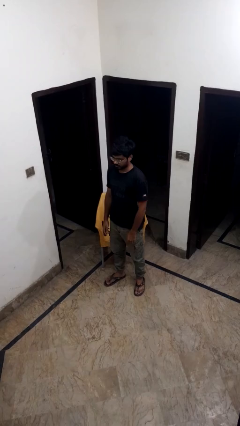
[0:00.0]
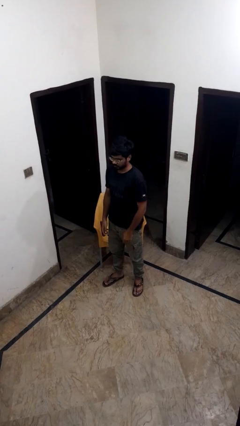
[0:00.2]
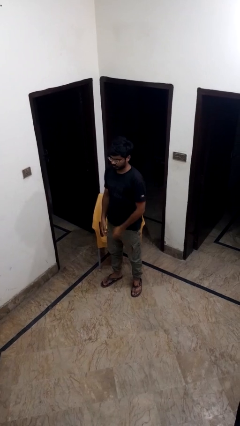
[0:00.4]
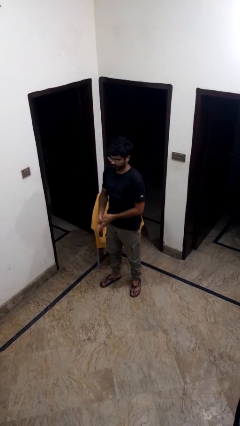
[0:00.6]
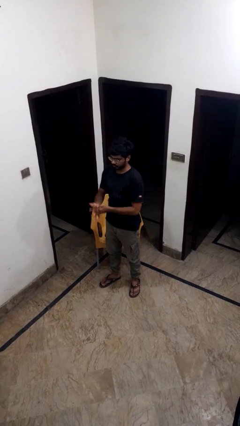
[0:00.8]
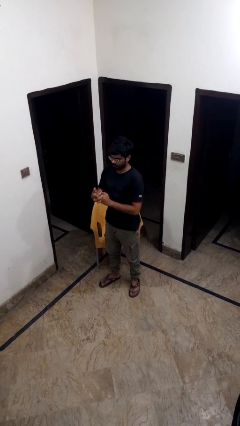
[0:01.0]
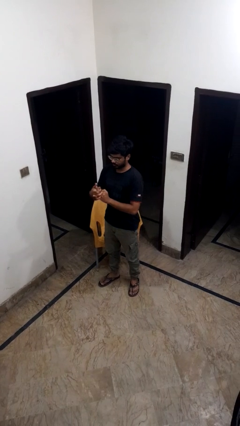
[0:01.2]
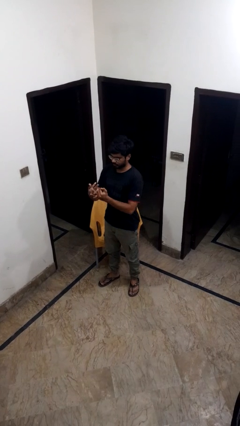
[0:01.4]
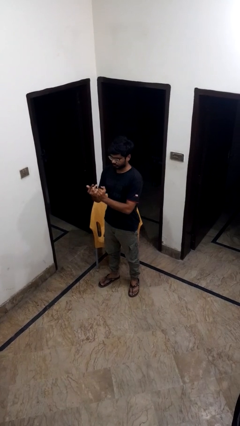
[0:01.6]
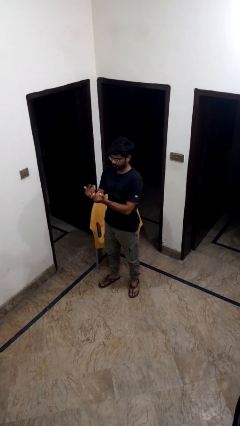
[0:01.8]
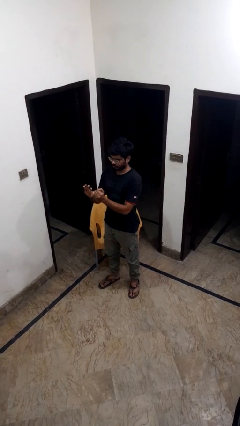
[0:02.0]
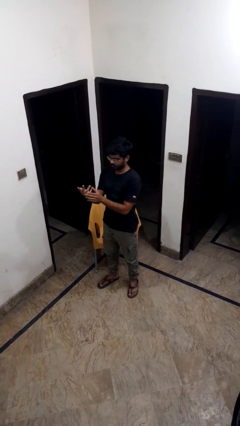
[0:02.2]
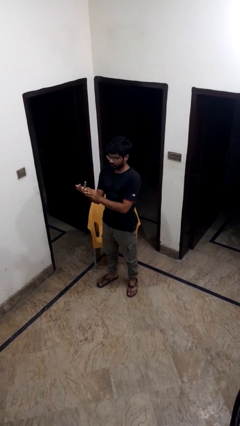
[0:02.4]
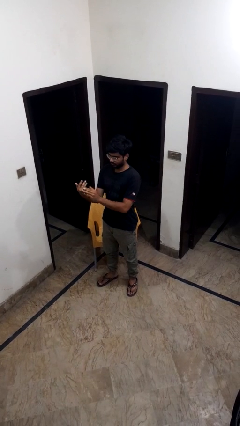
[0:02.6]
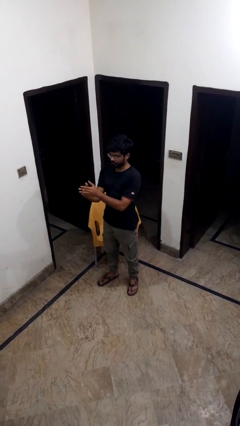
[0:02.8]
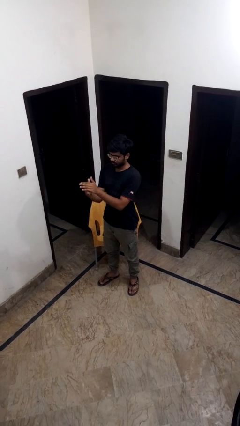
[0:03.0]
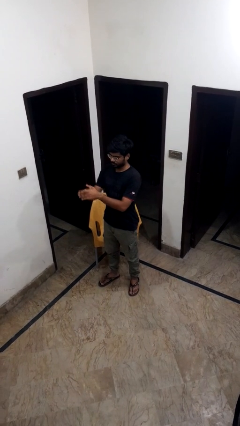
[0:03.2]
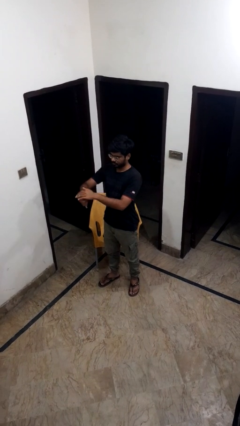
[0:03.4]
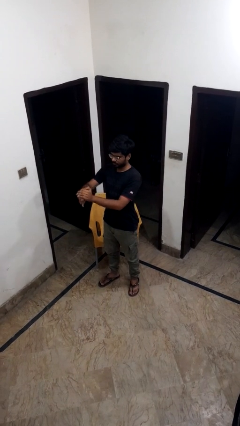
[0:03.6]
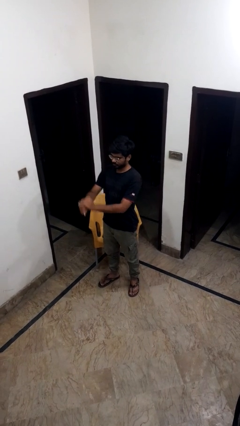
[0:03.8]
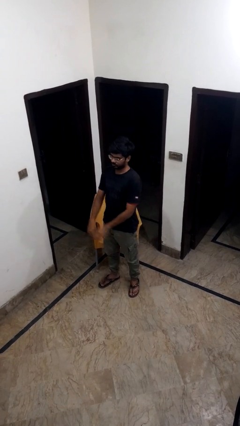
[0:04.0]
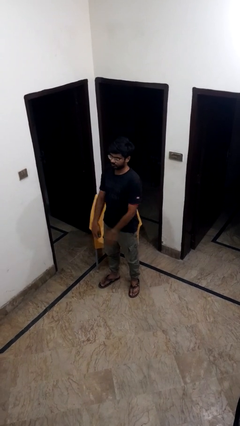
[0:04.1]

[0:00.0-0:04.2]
person cracks knuckles

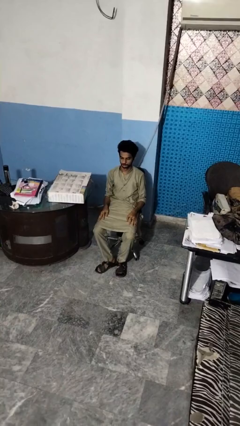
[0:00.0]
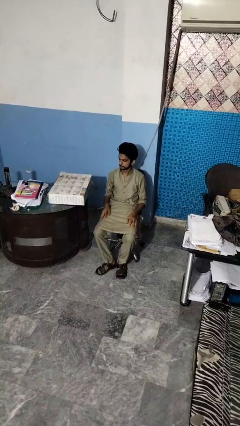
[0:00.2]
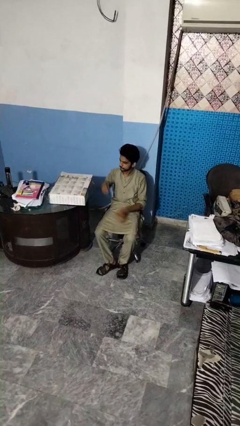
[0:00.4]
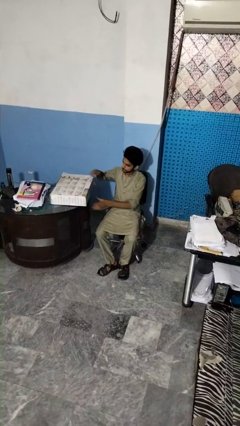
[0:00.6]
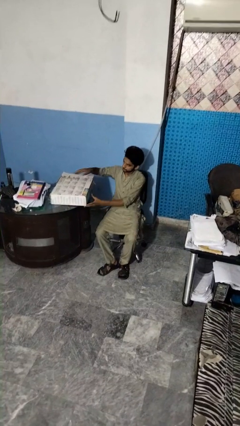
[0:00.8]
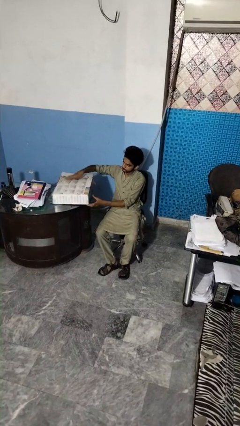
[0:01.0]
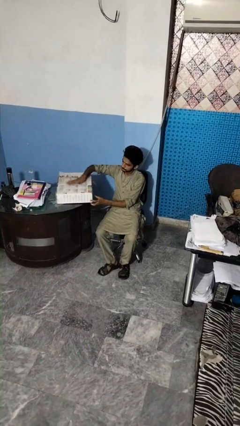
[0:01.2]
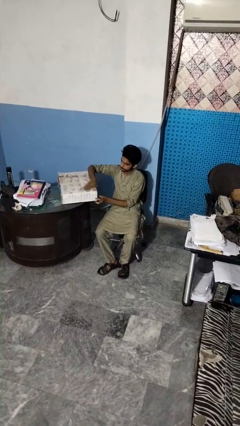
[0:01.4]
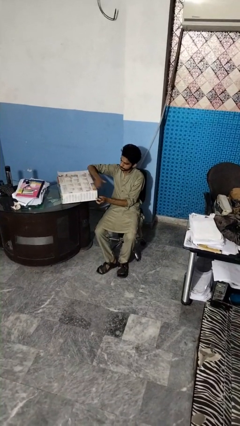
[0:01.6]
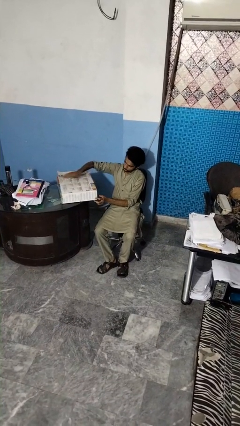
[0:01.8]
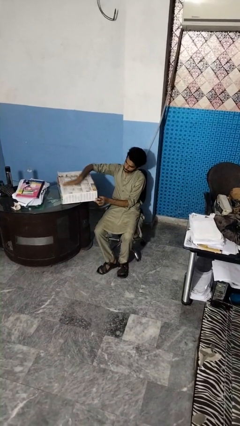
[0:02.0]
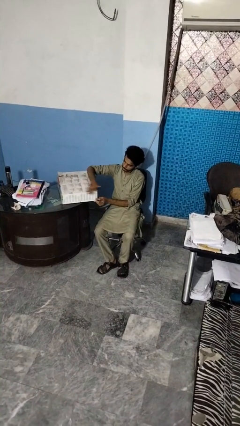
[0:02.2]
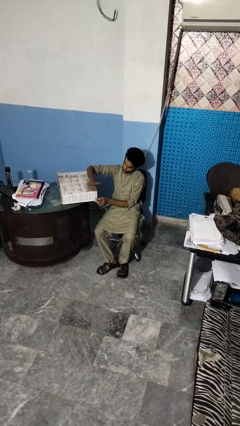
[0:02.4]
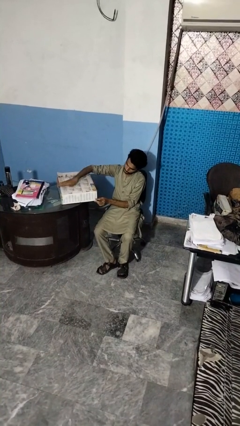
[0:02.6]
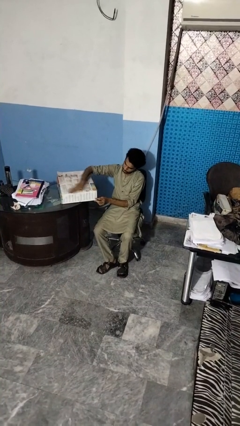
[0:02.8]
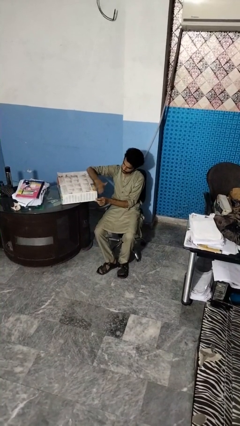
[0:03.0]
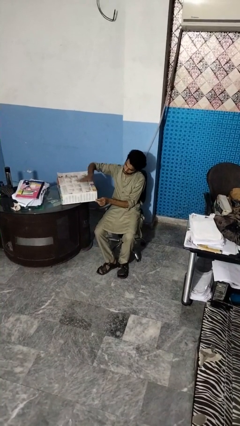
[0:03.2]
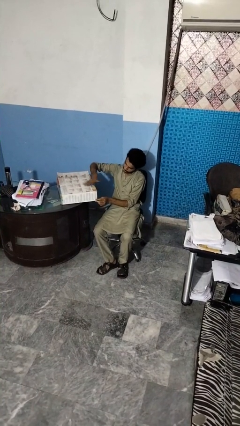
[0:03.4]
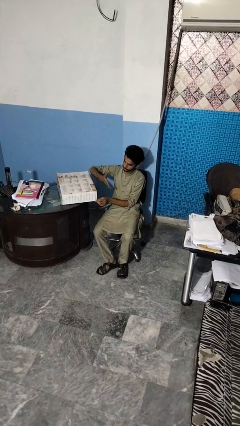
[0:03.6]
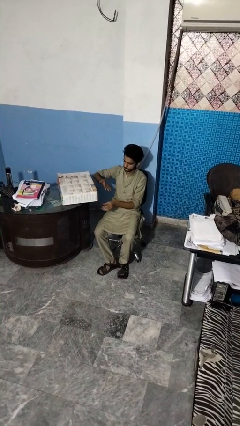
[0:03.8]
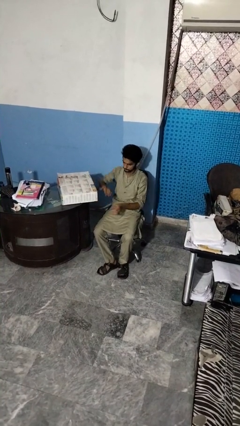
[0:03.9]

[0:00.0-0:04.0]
person waves hand over object

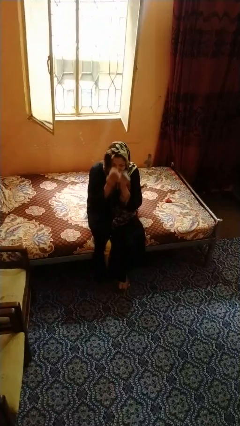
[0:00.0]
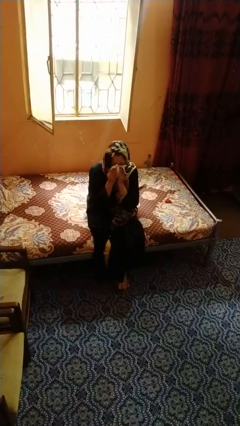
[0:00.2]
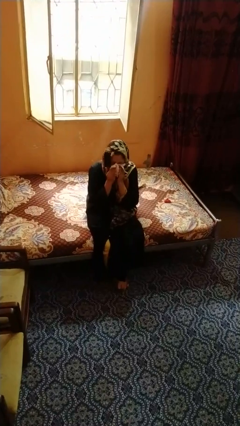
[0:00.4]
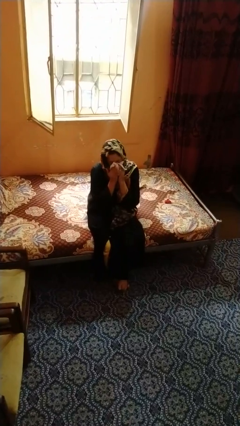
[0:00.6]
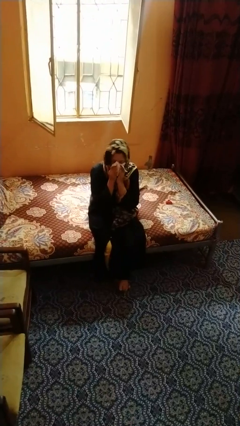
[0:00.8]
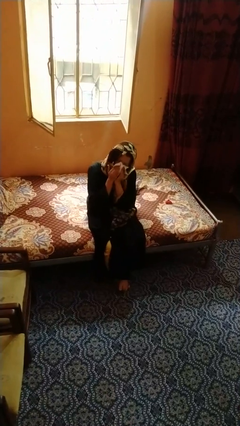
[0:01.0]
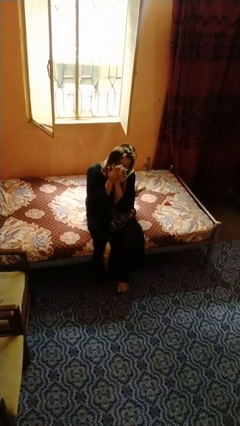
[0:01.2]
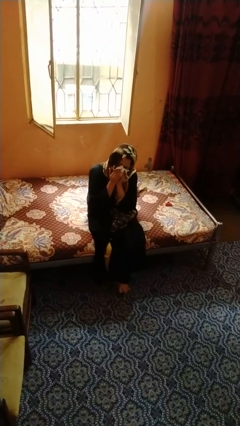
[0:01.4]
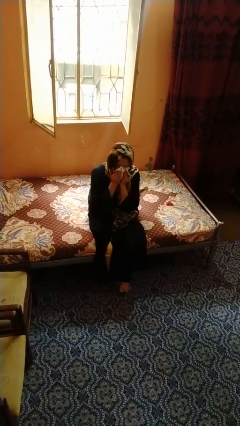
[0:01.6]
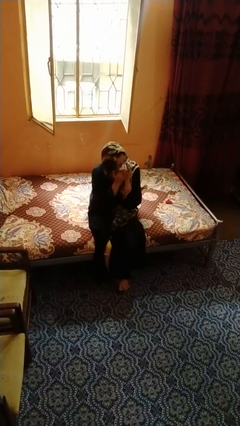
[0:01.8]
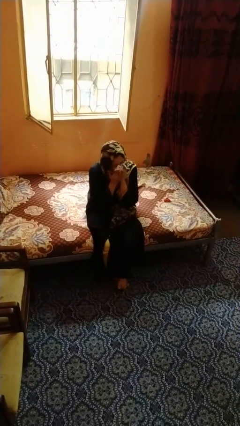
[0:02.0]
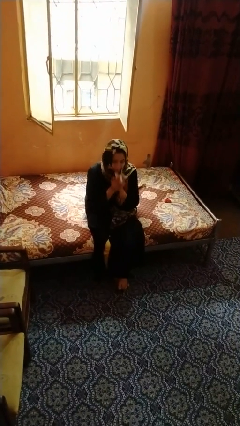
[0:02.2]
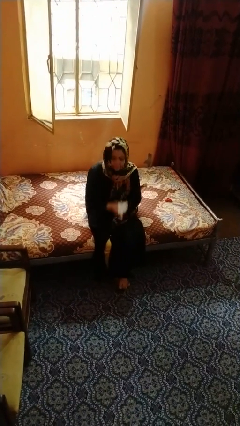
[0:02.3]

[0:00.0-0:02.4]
person blows nose

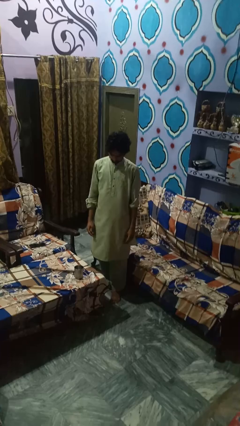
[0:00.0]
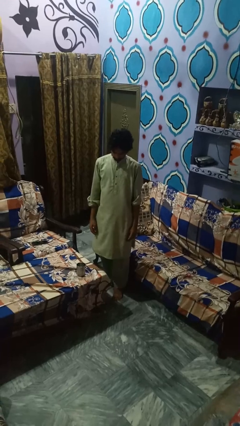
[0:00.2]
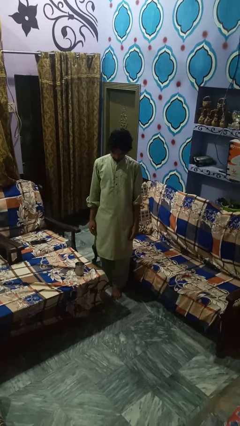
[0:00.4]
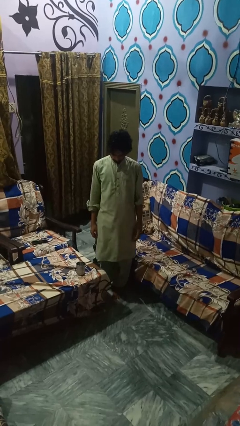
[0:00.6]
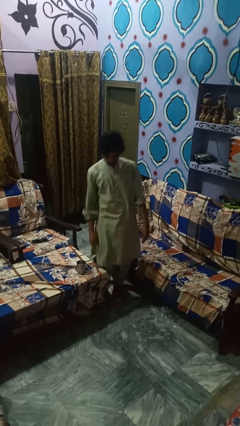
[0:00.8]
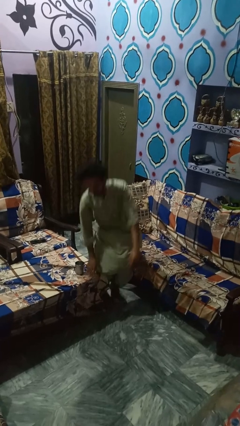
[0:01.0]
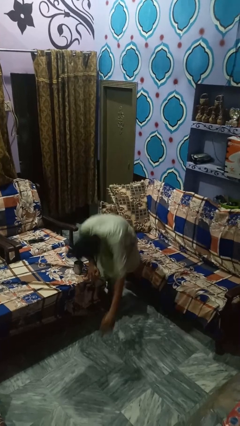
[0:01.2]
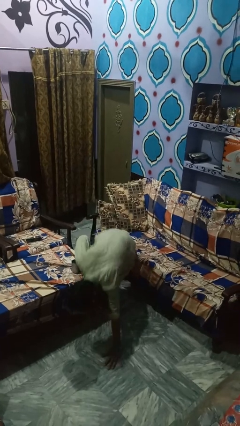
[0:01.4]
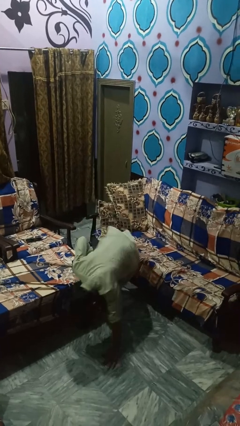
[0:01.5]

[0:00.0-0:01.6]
person trips on object on floor

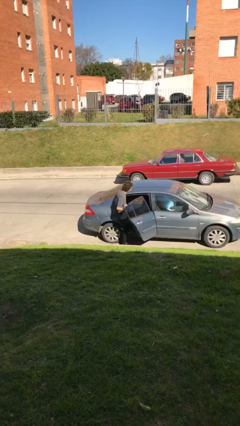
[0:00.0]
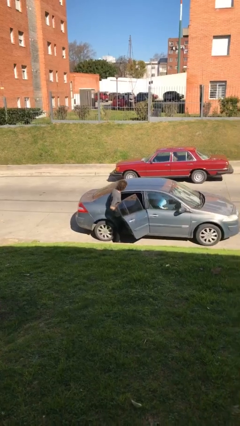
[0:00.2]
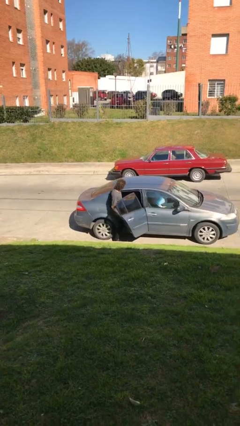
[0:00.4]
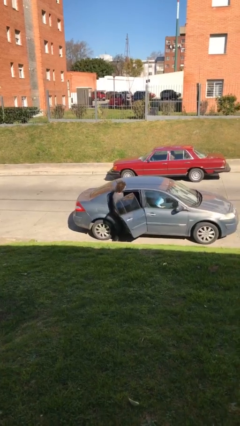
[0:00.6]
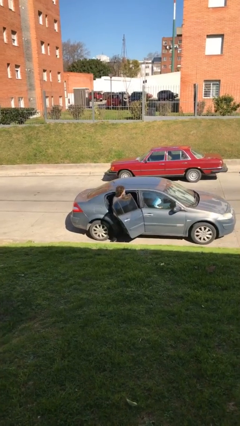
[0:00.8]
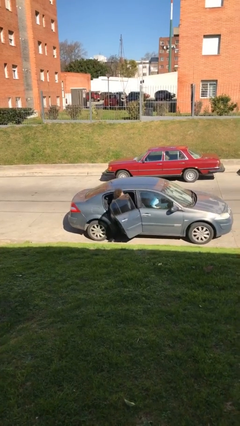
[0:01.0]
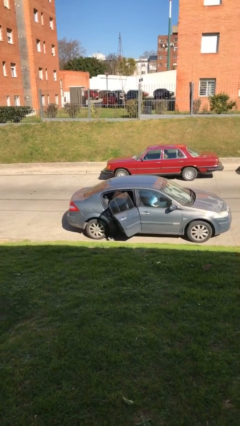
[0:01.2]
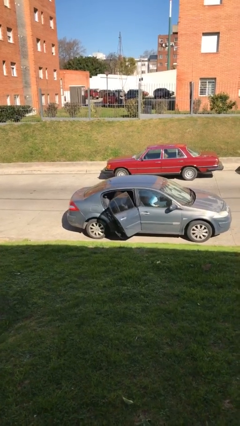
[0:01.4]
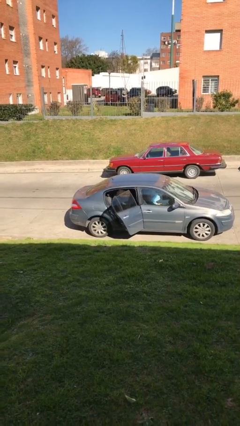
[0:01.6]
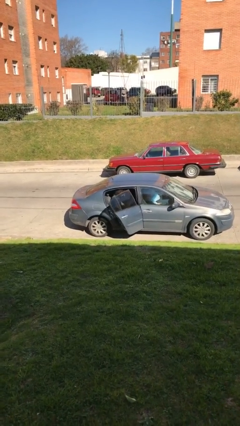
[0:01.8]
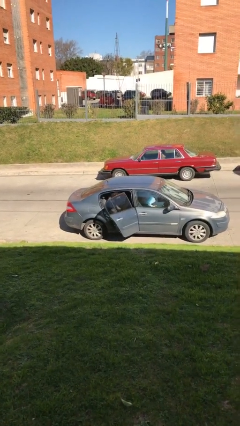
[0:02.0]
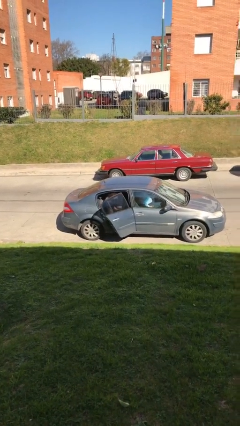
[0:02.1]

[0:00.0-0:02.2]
person enters car

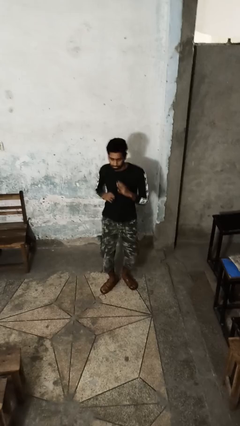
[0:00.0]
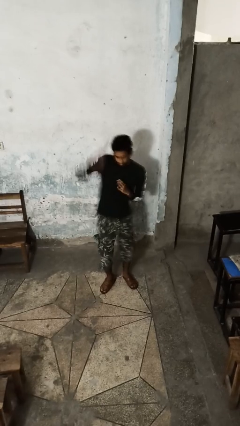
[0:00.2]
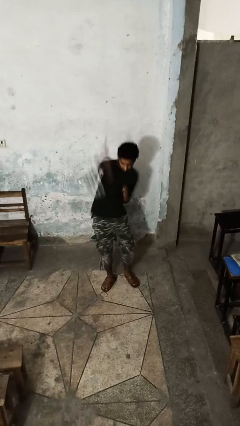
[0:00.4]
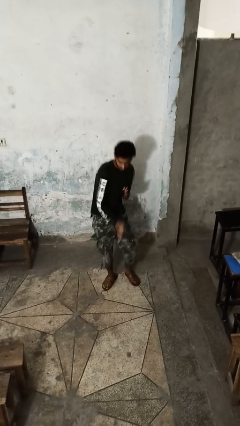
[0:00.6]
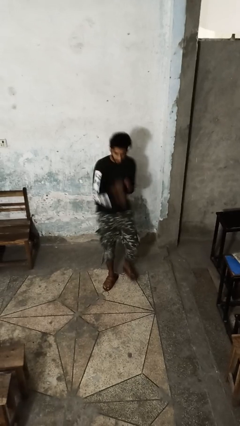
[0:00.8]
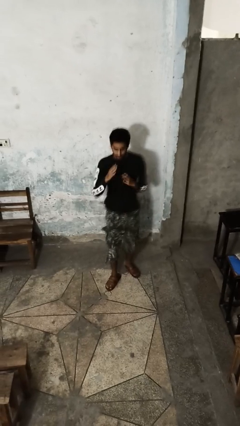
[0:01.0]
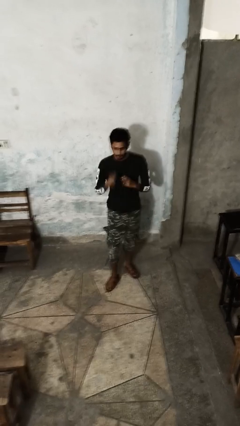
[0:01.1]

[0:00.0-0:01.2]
person karate chop

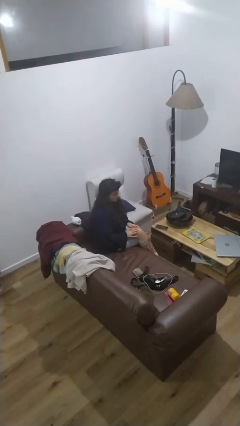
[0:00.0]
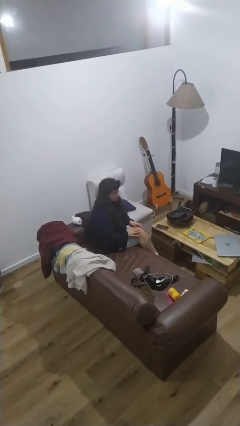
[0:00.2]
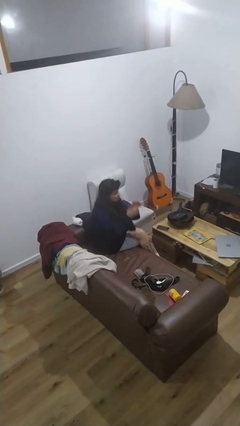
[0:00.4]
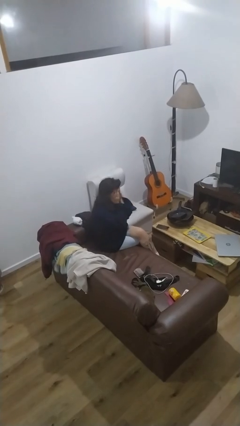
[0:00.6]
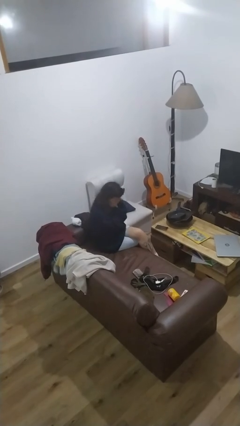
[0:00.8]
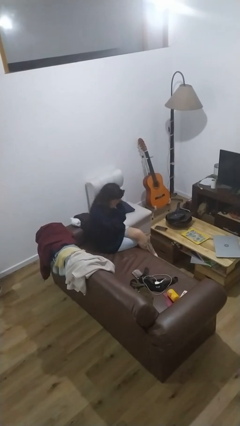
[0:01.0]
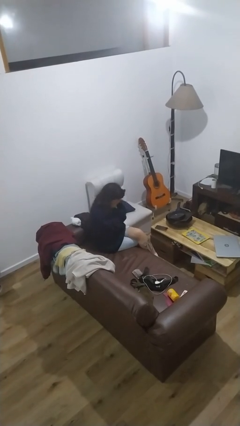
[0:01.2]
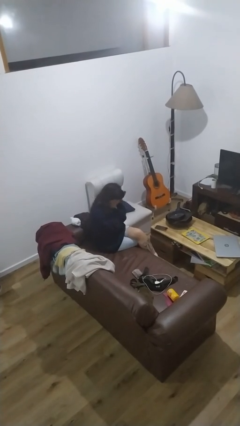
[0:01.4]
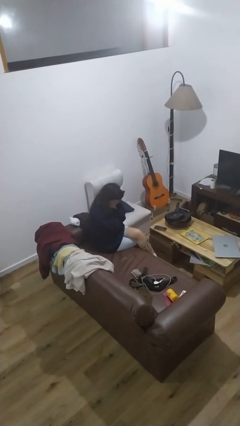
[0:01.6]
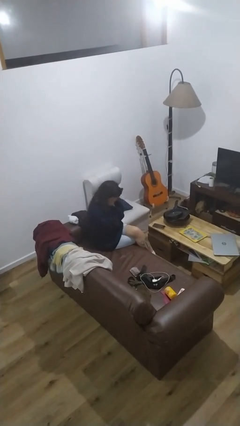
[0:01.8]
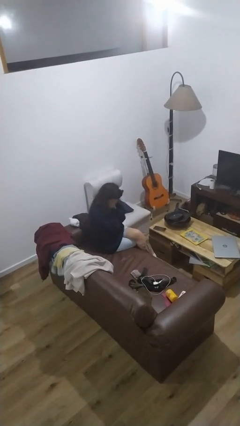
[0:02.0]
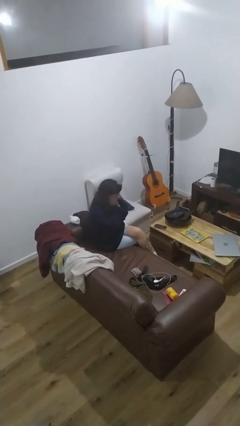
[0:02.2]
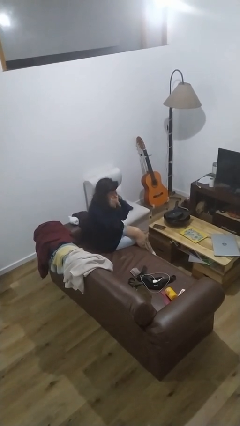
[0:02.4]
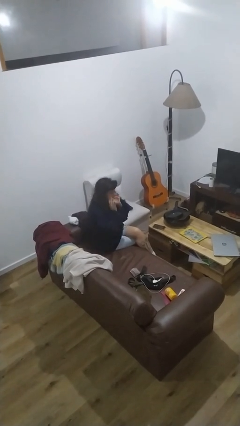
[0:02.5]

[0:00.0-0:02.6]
person covers face with hands
